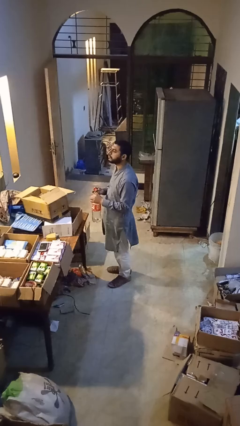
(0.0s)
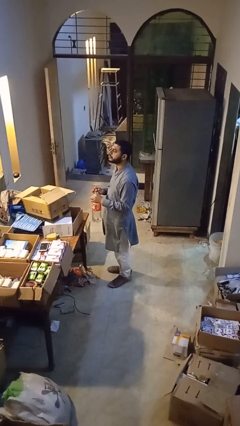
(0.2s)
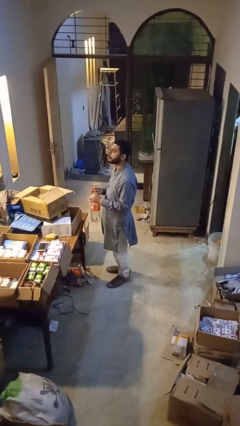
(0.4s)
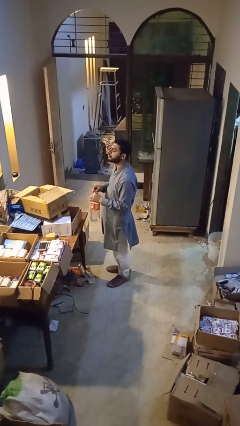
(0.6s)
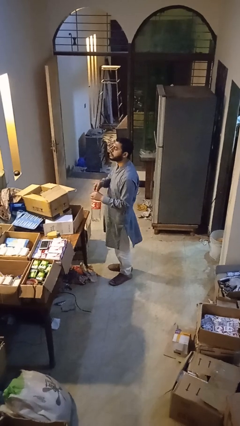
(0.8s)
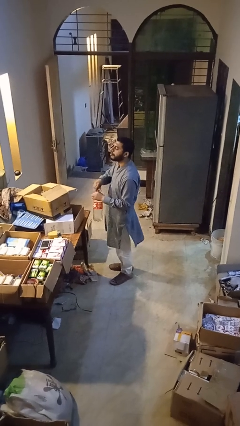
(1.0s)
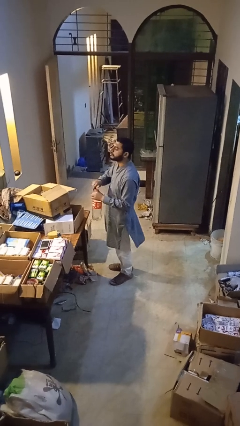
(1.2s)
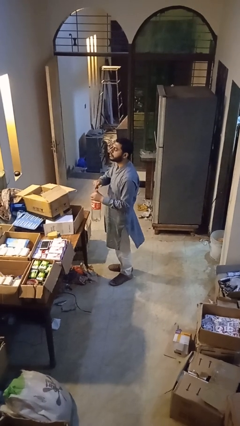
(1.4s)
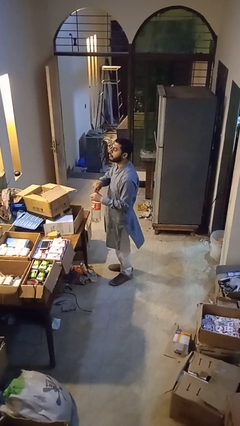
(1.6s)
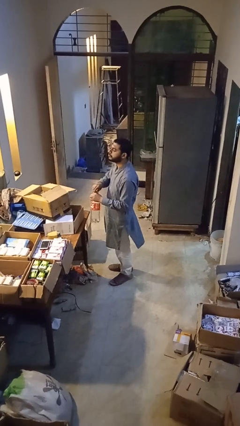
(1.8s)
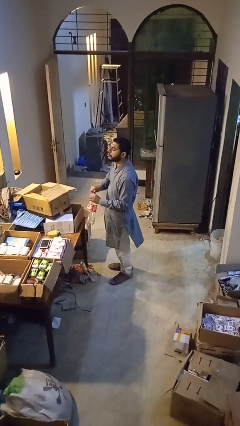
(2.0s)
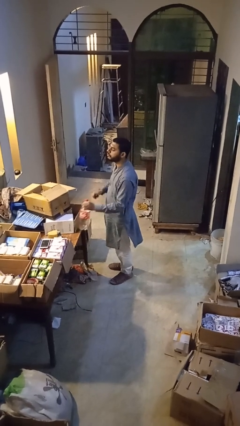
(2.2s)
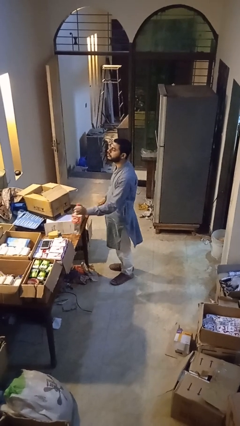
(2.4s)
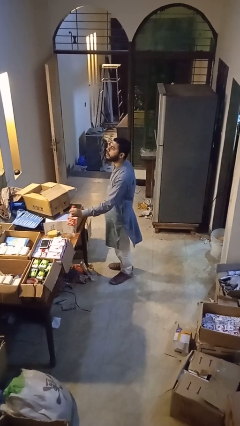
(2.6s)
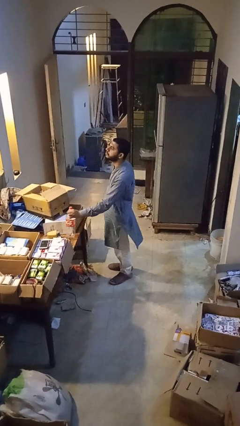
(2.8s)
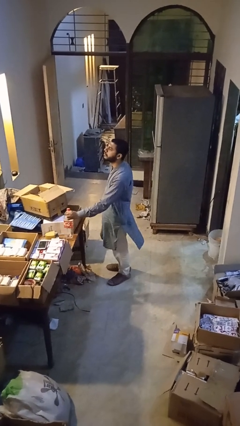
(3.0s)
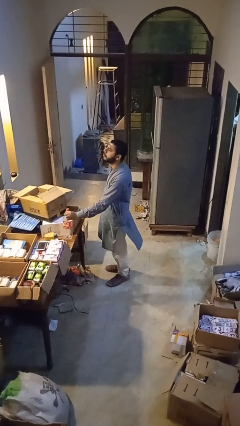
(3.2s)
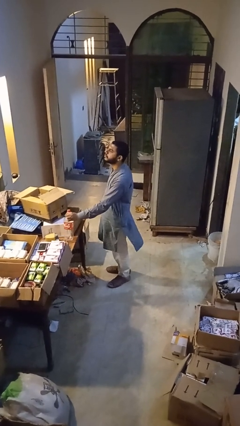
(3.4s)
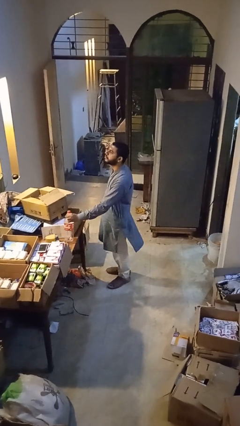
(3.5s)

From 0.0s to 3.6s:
person screws lid to bottle

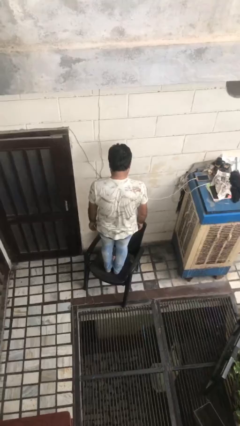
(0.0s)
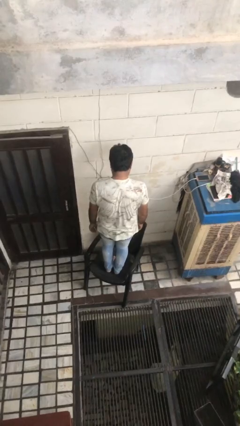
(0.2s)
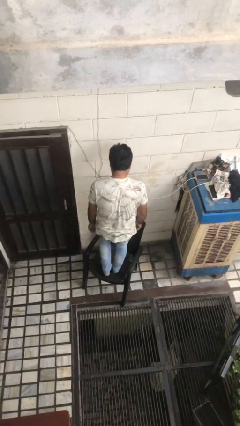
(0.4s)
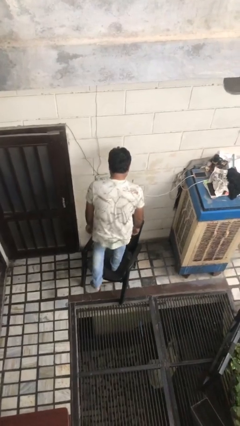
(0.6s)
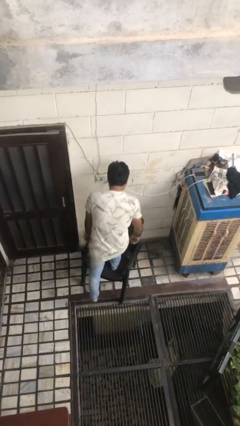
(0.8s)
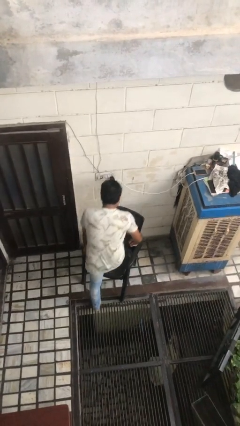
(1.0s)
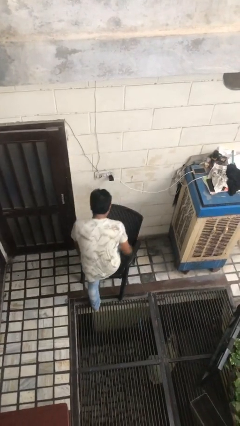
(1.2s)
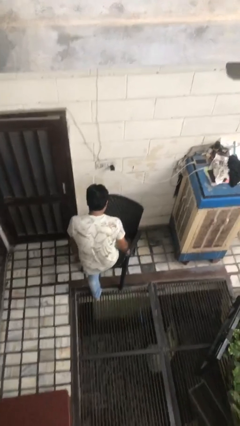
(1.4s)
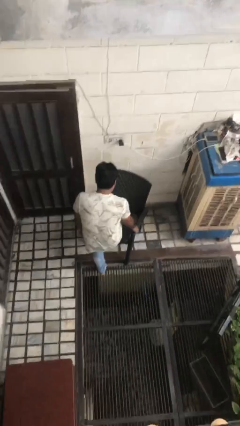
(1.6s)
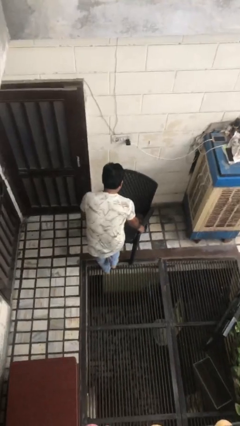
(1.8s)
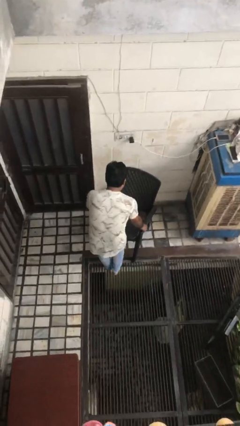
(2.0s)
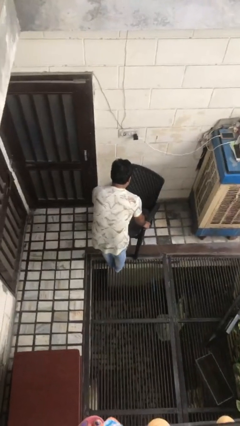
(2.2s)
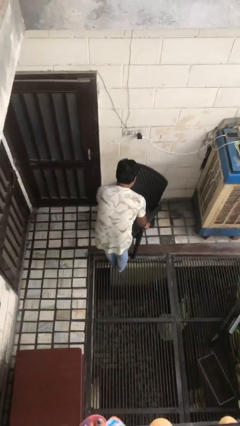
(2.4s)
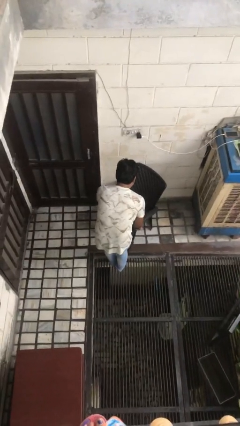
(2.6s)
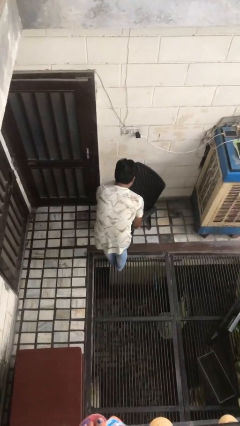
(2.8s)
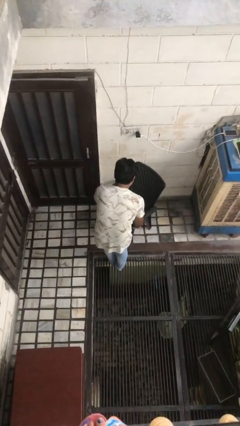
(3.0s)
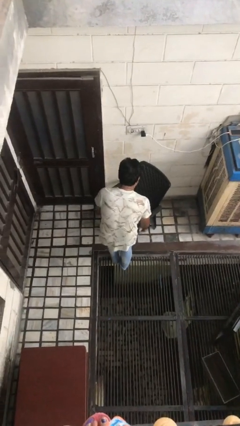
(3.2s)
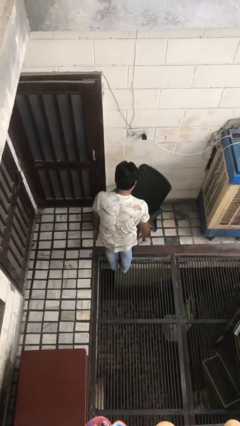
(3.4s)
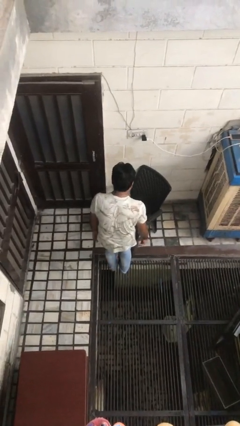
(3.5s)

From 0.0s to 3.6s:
person climbs off chair

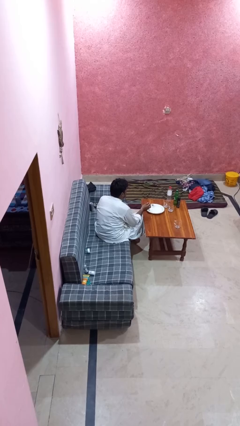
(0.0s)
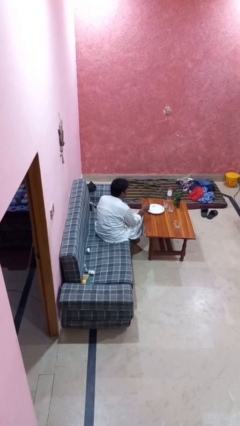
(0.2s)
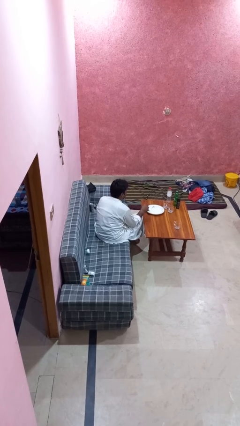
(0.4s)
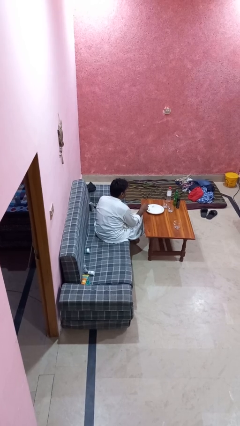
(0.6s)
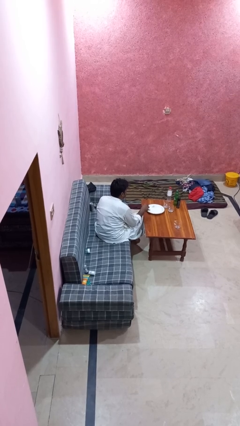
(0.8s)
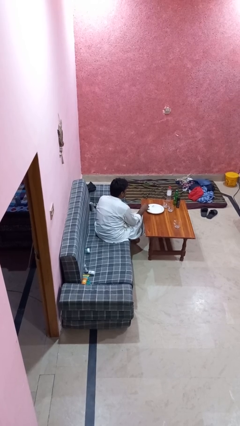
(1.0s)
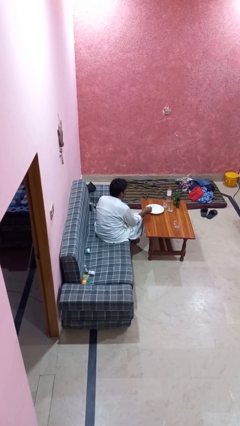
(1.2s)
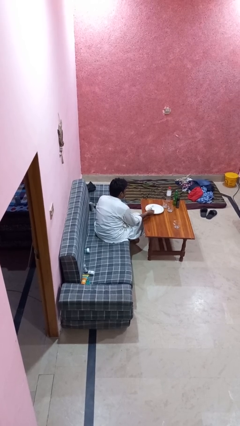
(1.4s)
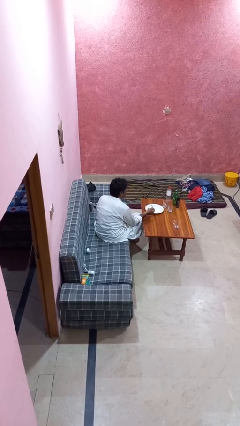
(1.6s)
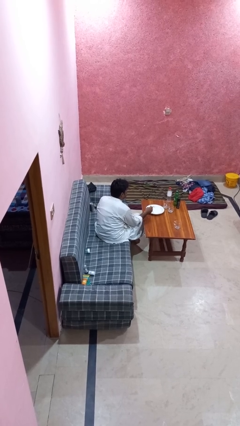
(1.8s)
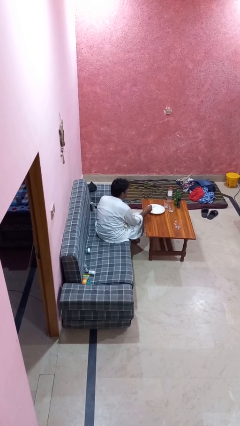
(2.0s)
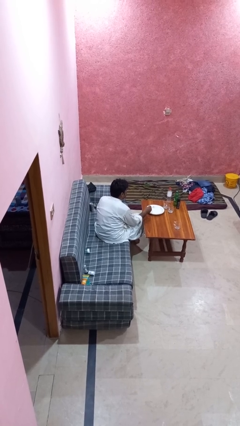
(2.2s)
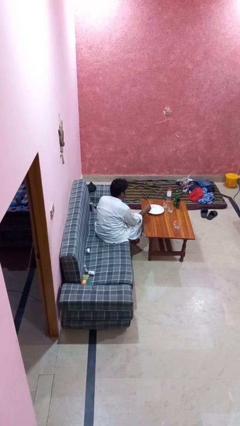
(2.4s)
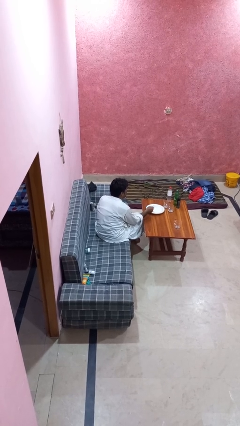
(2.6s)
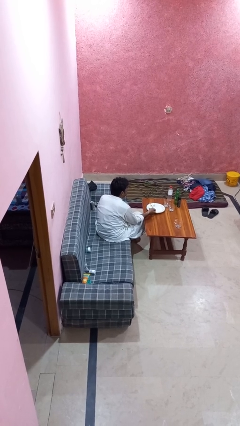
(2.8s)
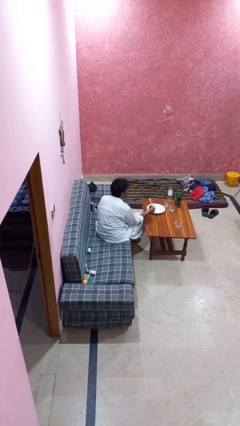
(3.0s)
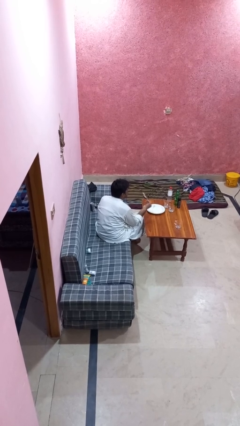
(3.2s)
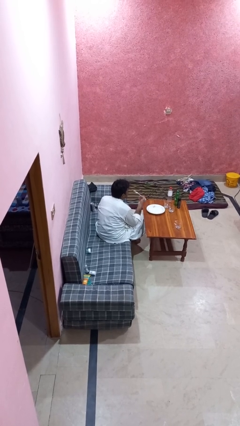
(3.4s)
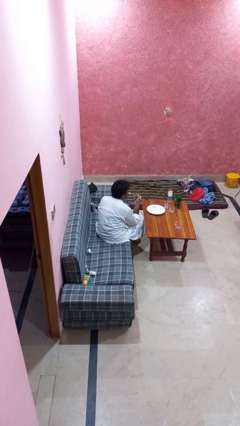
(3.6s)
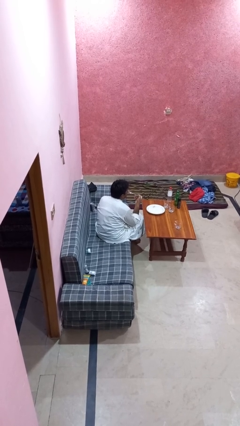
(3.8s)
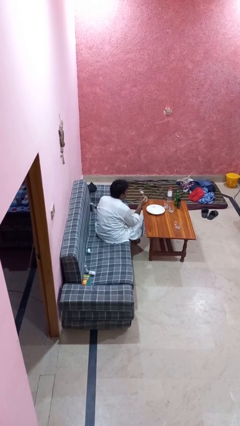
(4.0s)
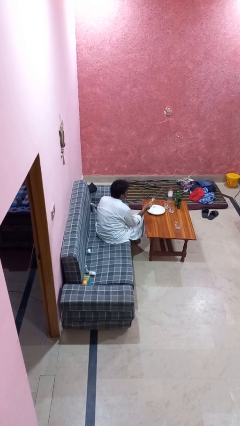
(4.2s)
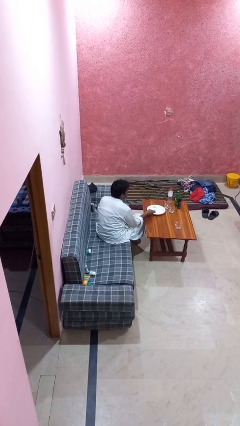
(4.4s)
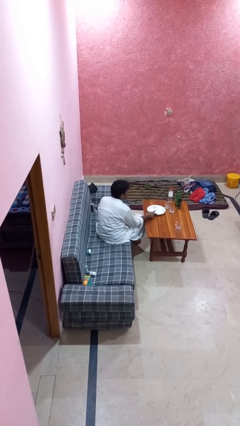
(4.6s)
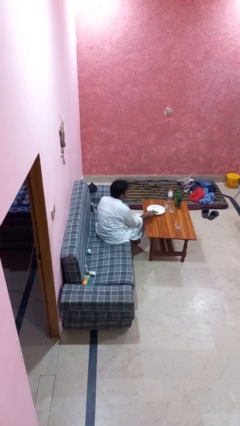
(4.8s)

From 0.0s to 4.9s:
person eats with utensil

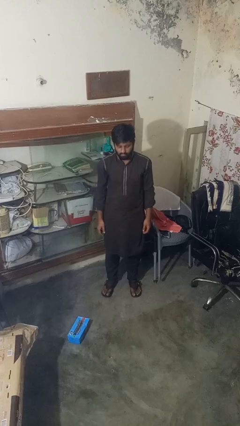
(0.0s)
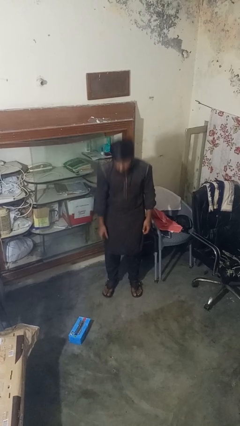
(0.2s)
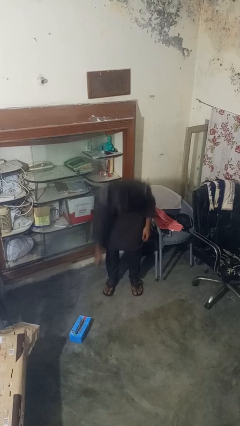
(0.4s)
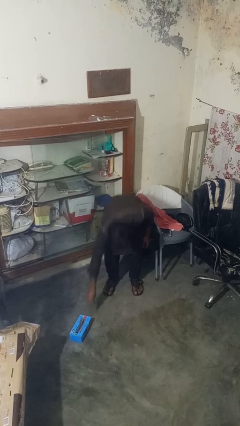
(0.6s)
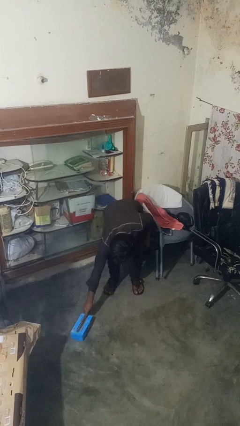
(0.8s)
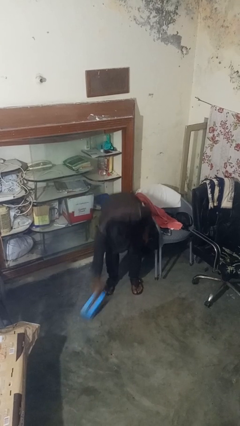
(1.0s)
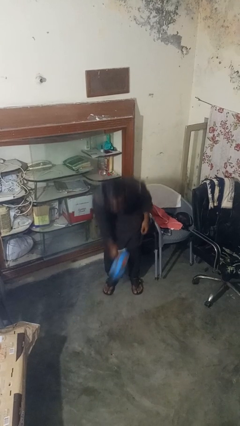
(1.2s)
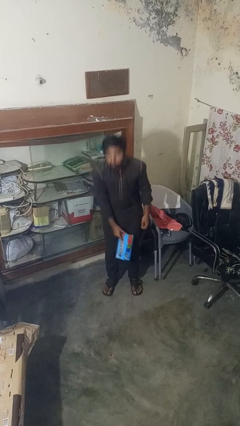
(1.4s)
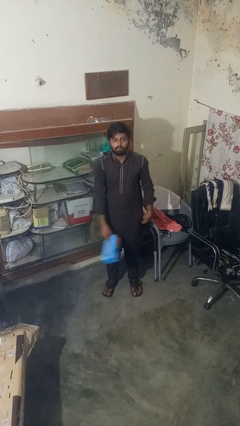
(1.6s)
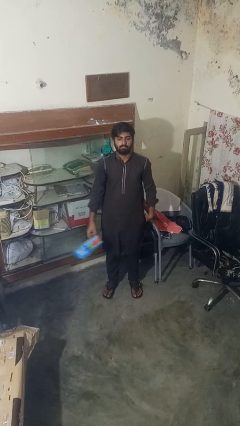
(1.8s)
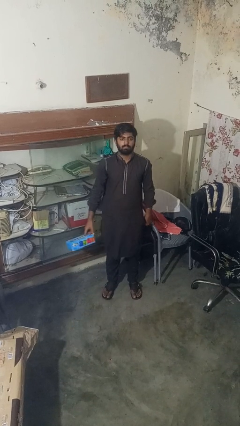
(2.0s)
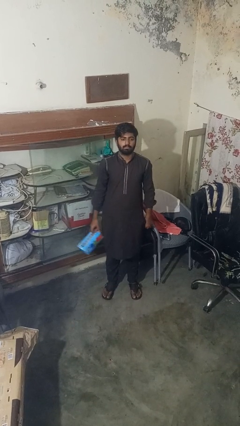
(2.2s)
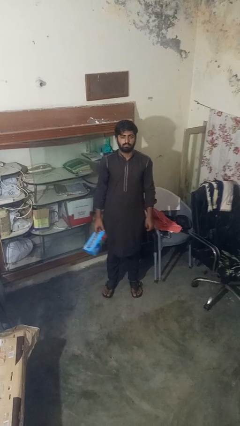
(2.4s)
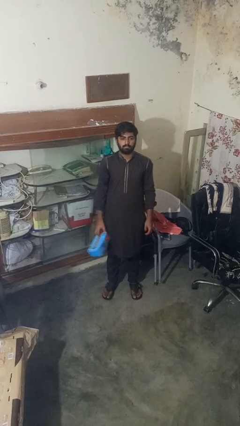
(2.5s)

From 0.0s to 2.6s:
person picks up object from floor

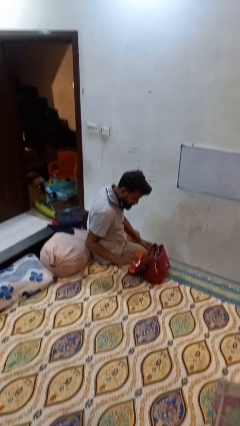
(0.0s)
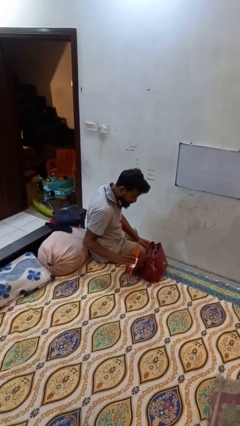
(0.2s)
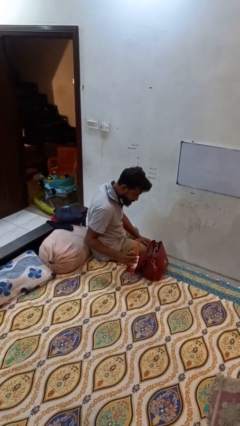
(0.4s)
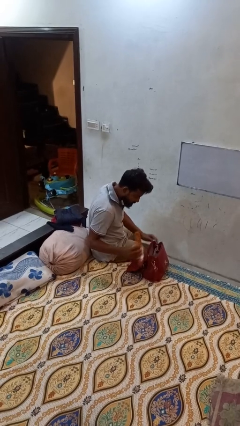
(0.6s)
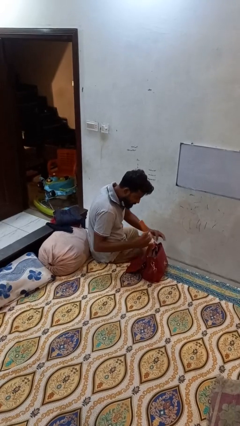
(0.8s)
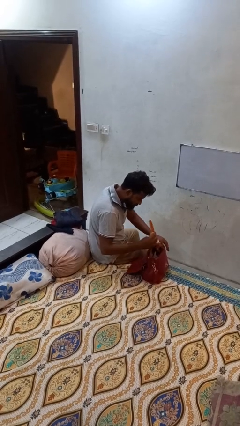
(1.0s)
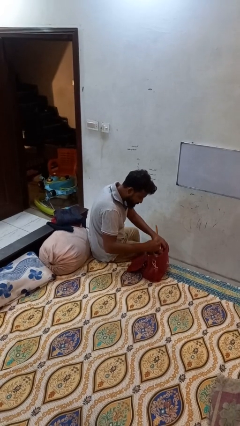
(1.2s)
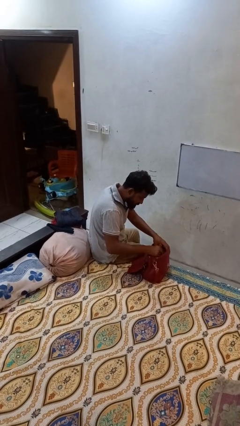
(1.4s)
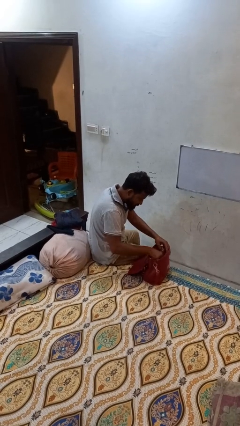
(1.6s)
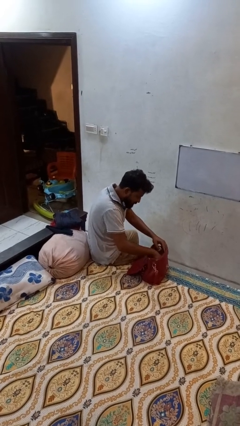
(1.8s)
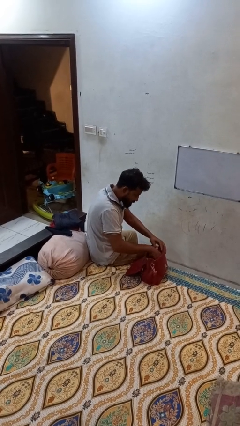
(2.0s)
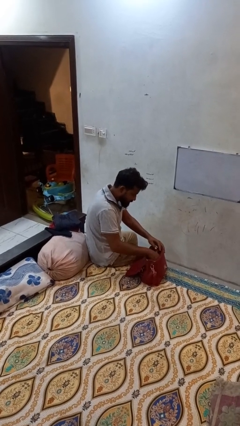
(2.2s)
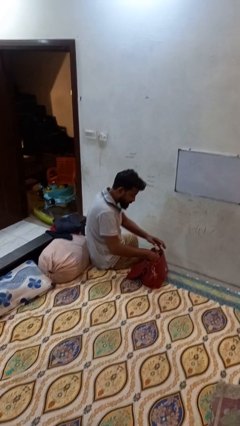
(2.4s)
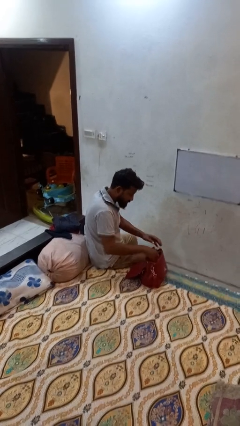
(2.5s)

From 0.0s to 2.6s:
person puts object into purse

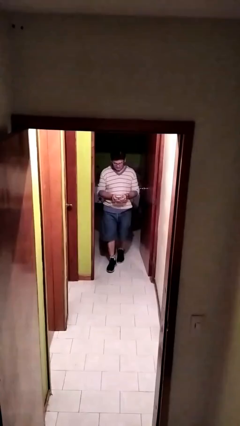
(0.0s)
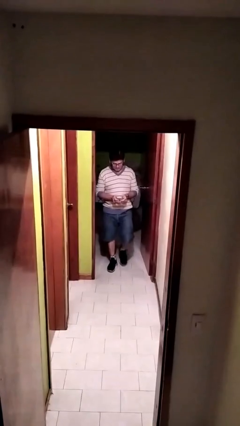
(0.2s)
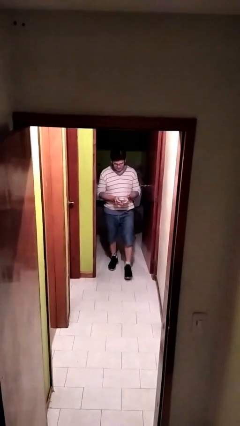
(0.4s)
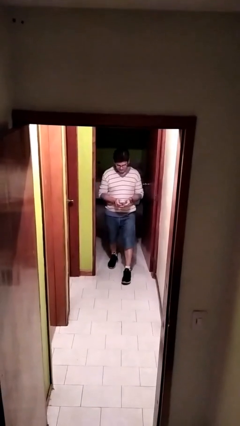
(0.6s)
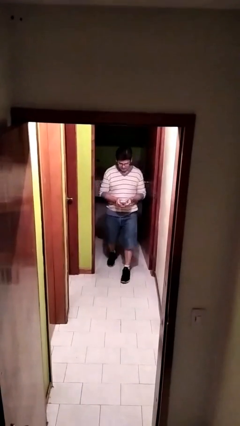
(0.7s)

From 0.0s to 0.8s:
person enters scene through structure
